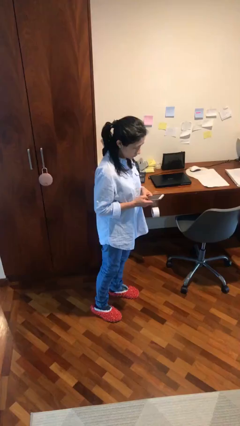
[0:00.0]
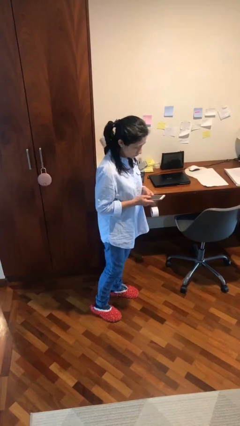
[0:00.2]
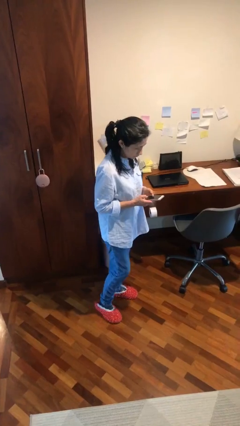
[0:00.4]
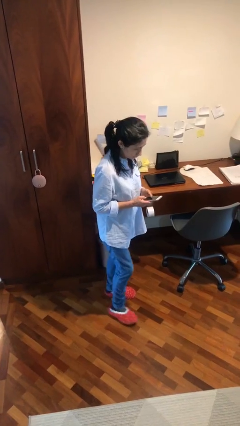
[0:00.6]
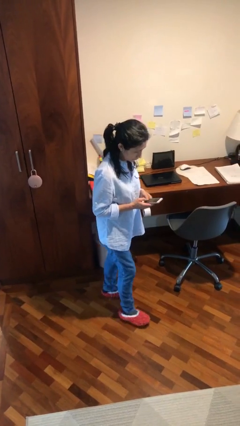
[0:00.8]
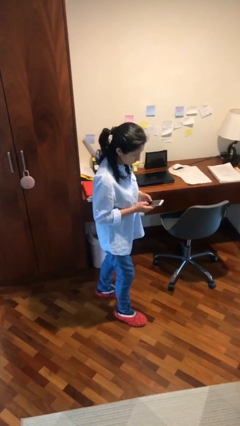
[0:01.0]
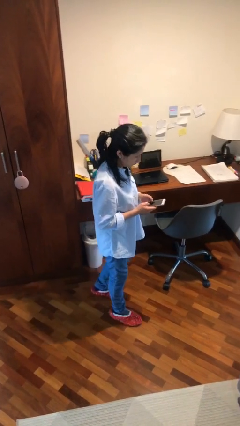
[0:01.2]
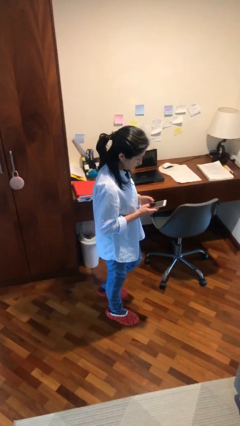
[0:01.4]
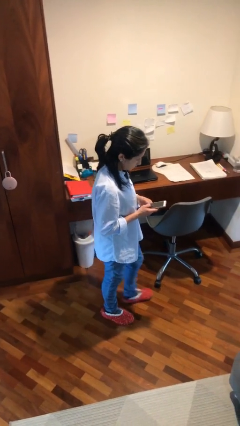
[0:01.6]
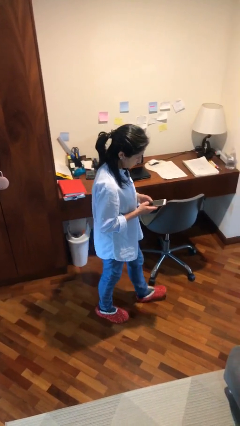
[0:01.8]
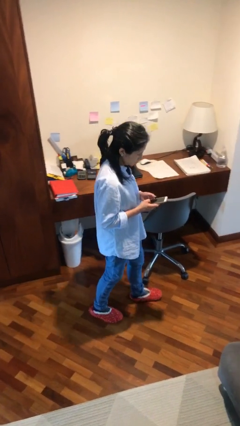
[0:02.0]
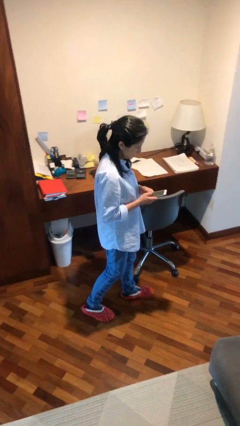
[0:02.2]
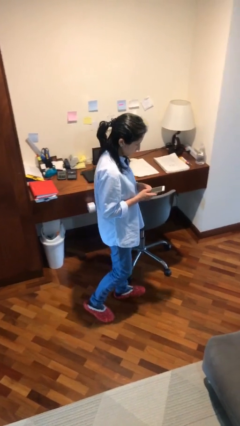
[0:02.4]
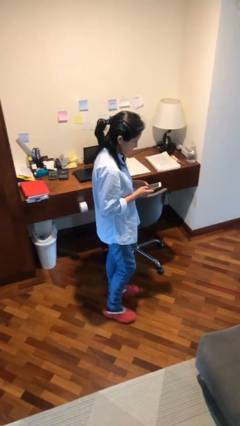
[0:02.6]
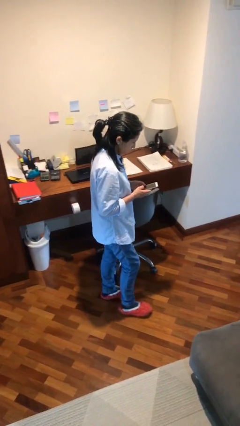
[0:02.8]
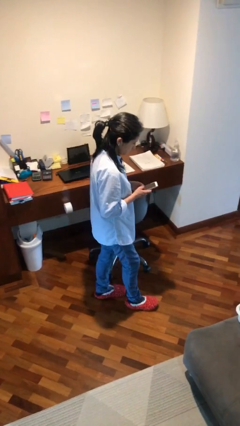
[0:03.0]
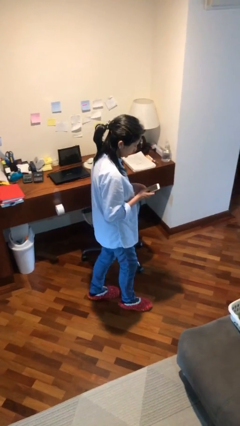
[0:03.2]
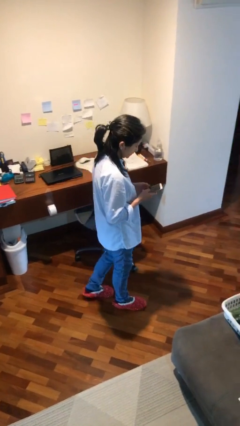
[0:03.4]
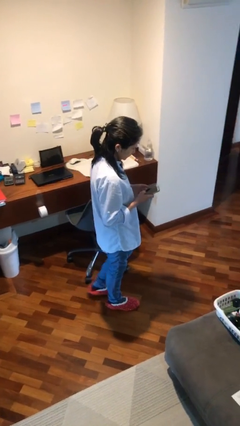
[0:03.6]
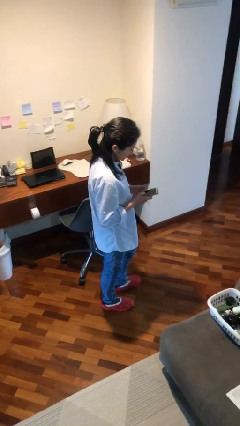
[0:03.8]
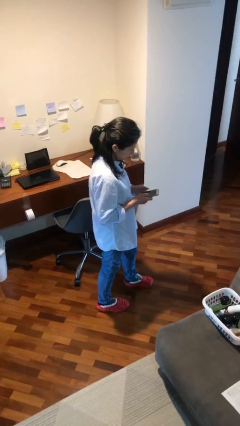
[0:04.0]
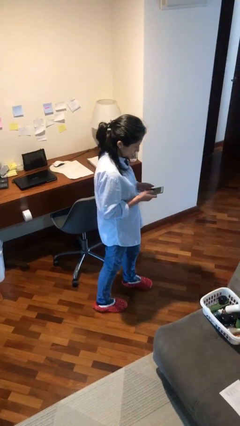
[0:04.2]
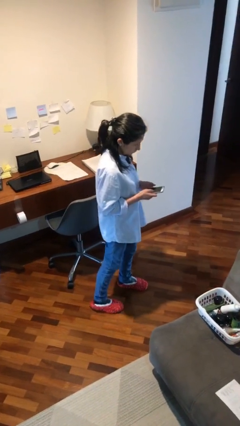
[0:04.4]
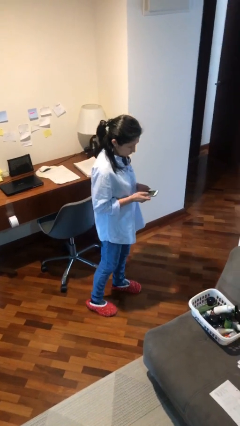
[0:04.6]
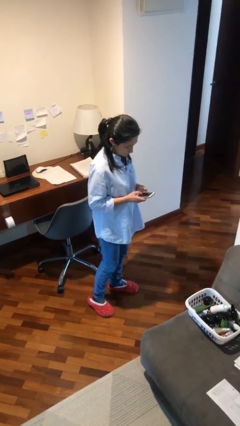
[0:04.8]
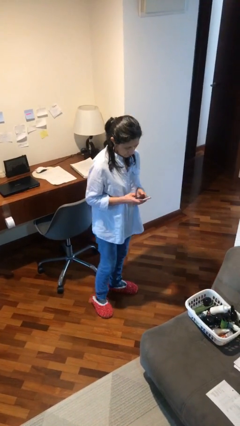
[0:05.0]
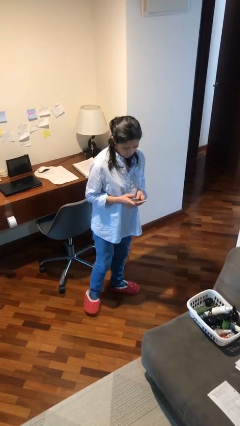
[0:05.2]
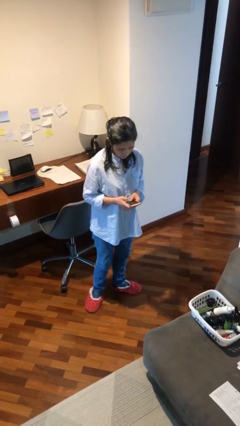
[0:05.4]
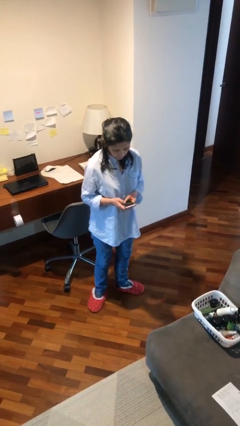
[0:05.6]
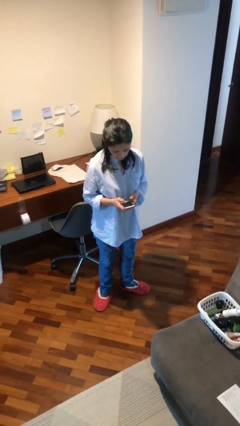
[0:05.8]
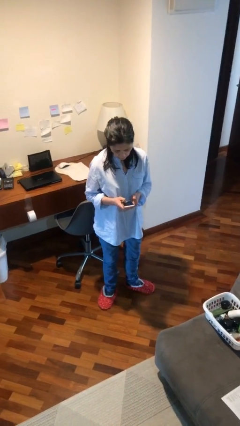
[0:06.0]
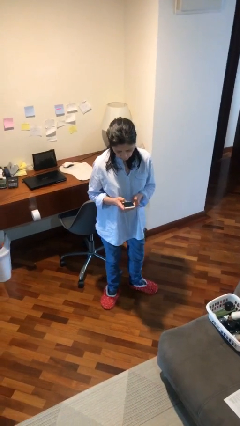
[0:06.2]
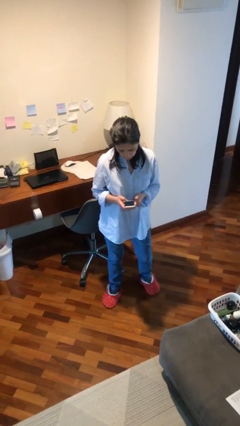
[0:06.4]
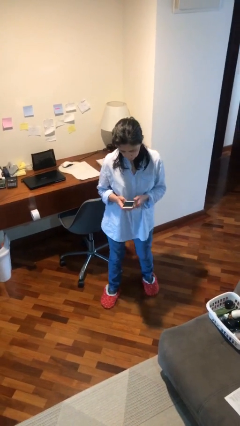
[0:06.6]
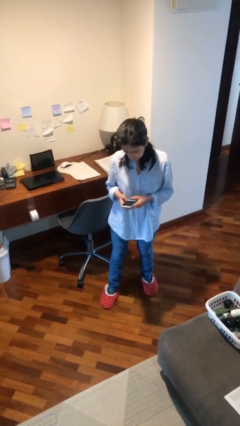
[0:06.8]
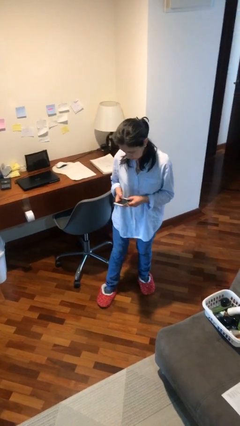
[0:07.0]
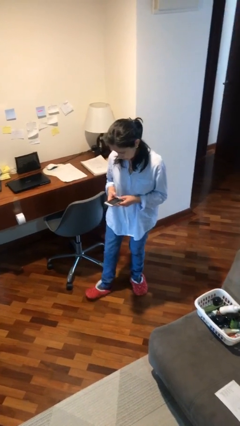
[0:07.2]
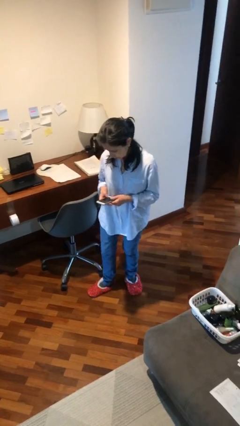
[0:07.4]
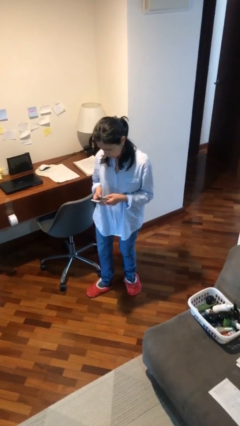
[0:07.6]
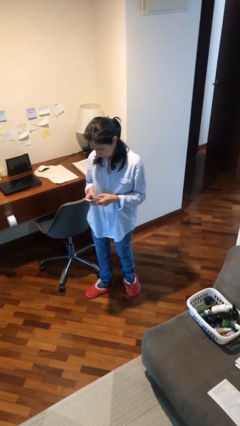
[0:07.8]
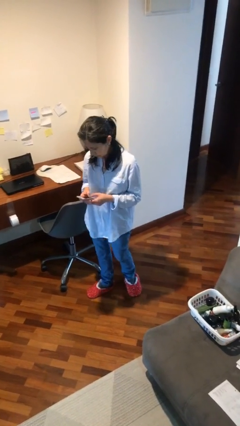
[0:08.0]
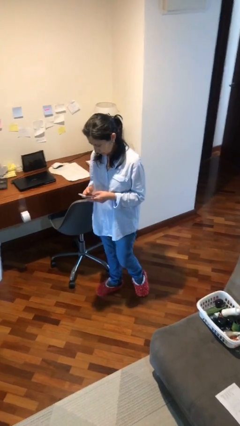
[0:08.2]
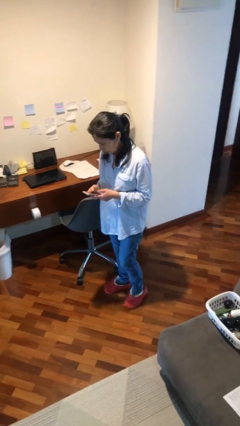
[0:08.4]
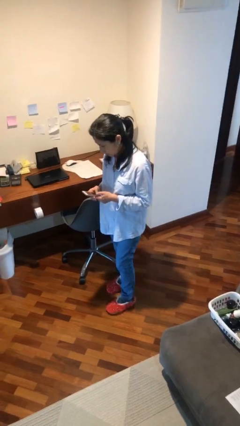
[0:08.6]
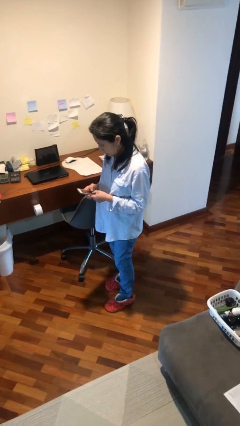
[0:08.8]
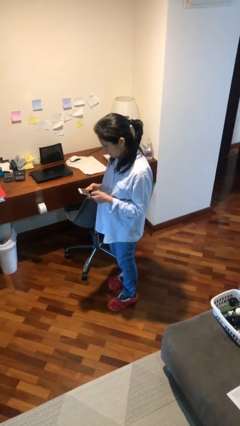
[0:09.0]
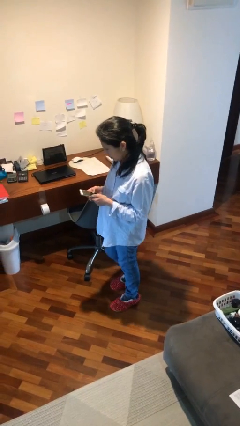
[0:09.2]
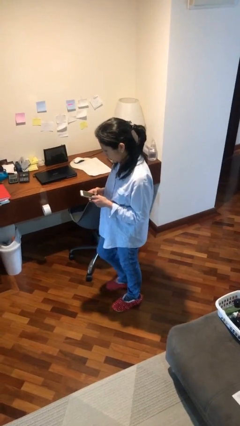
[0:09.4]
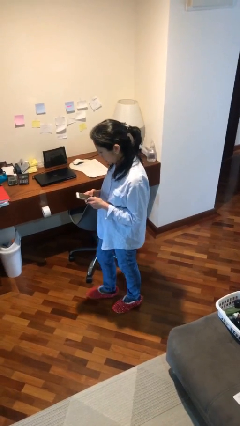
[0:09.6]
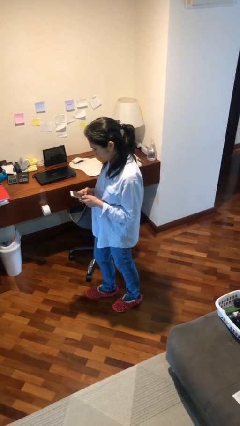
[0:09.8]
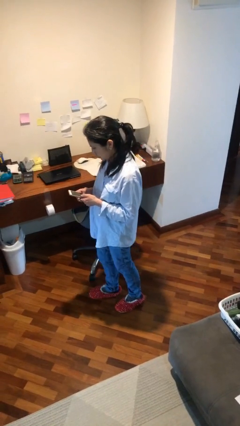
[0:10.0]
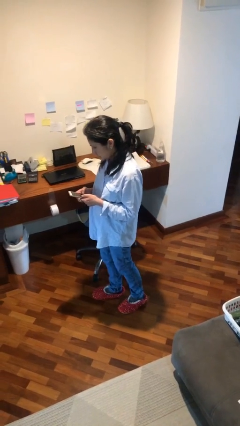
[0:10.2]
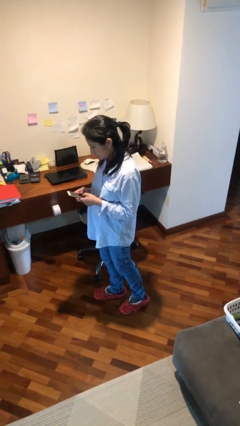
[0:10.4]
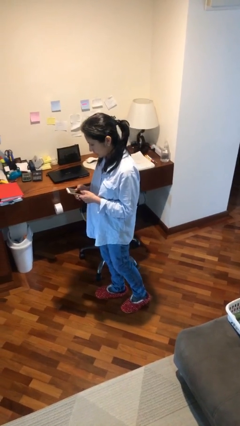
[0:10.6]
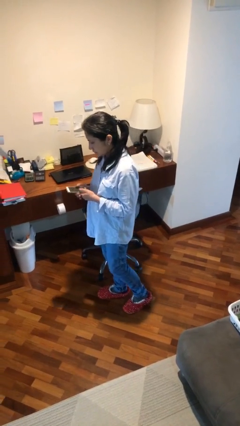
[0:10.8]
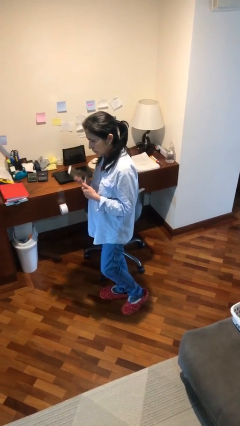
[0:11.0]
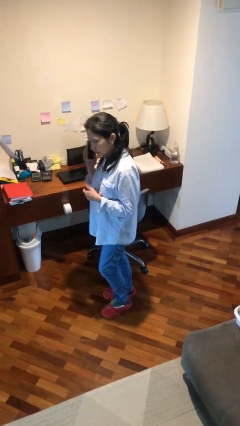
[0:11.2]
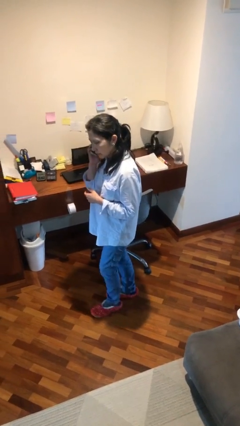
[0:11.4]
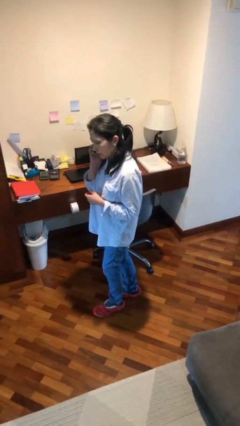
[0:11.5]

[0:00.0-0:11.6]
person texts on phone

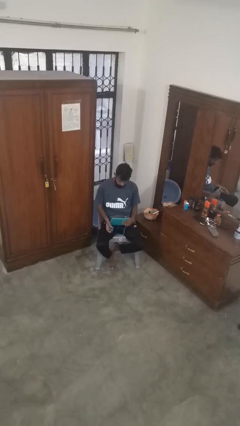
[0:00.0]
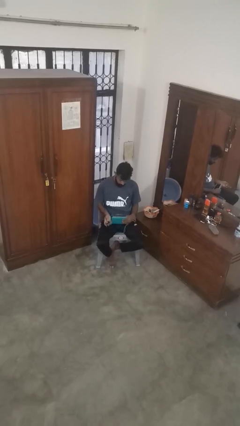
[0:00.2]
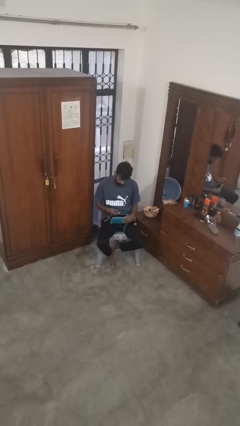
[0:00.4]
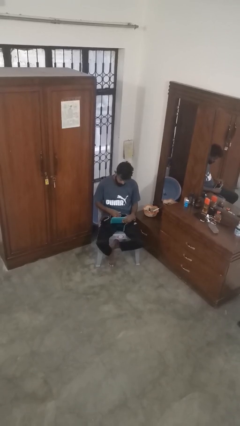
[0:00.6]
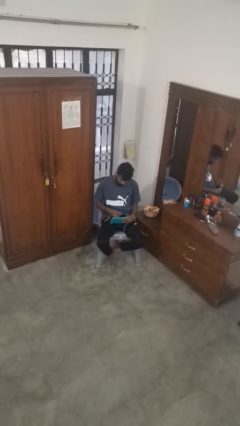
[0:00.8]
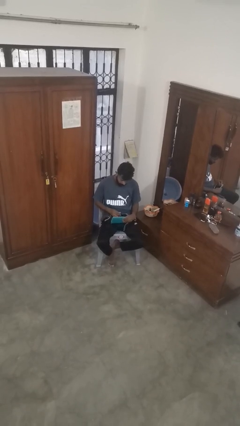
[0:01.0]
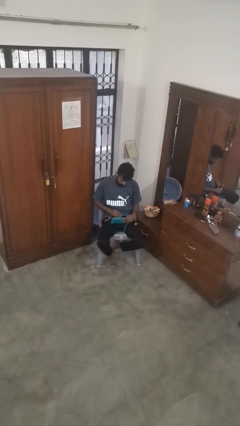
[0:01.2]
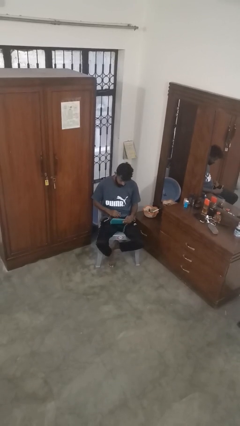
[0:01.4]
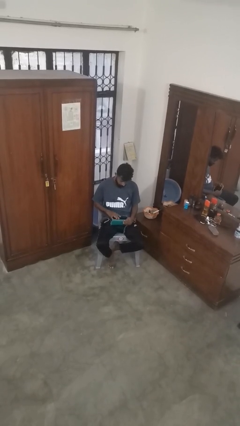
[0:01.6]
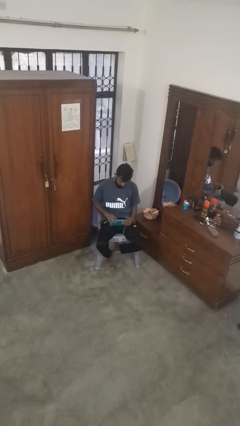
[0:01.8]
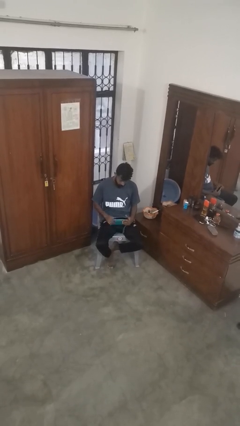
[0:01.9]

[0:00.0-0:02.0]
person puts object into purse

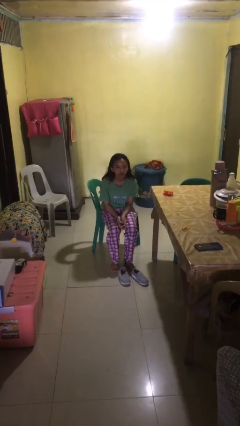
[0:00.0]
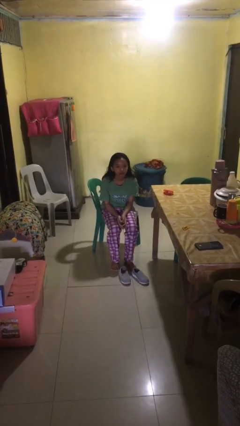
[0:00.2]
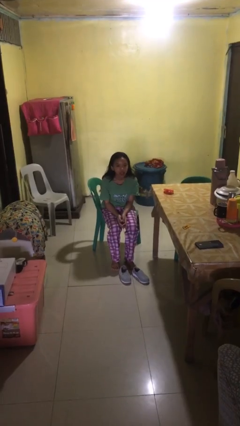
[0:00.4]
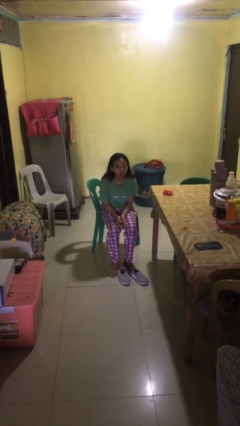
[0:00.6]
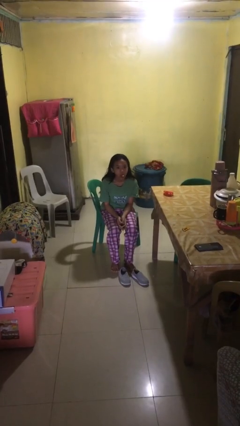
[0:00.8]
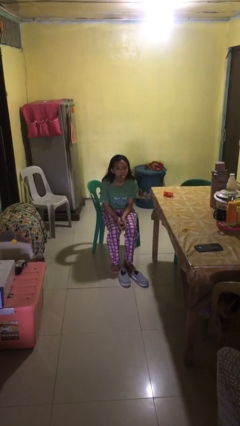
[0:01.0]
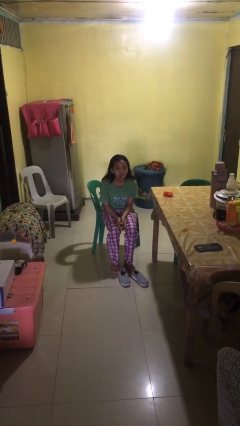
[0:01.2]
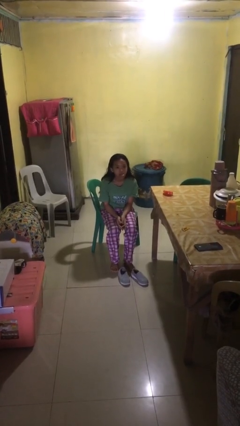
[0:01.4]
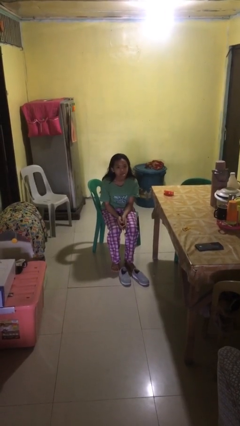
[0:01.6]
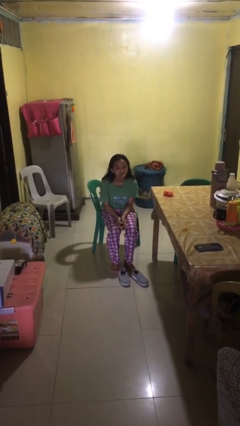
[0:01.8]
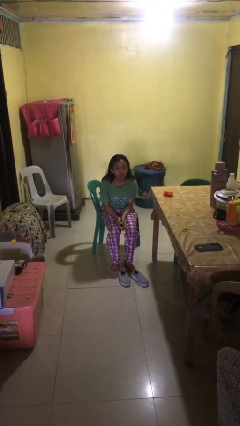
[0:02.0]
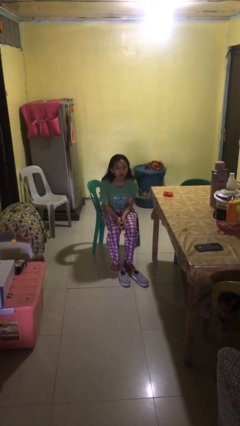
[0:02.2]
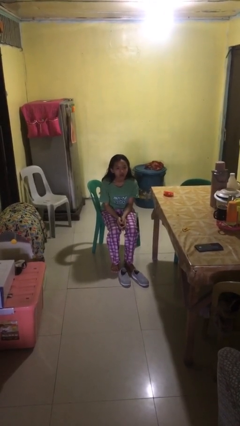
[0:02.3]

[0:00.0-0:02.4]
person sticks out tongue

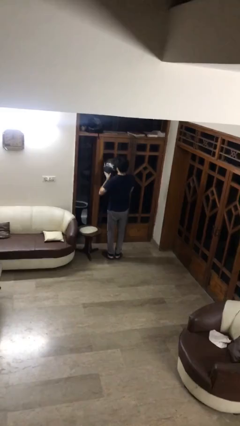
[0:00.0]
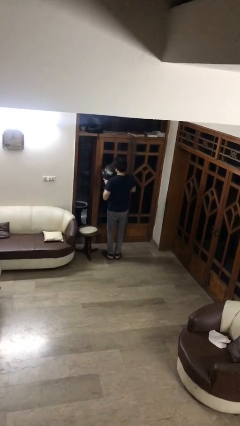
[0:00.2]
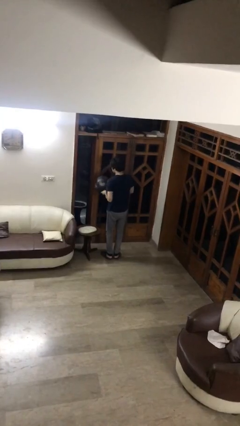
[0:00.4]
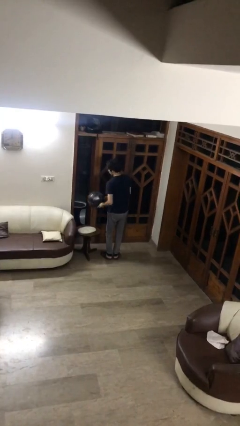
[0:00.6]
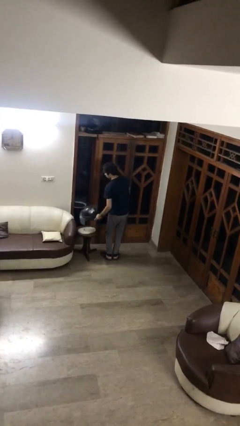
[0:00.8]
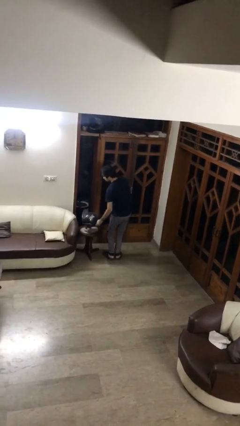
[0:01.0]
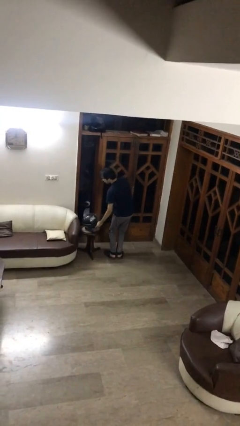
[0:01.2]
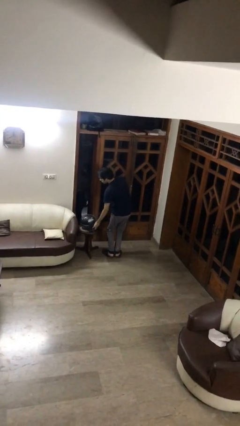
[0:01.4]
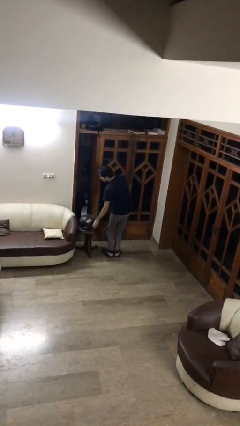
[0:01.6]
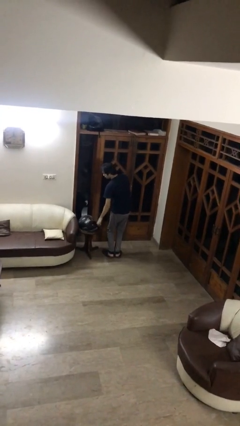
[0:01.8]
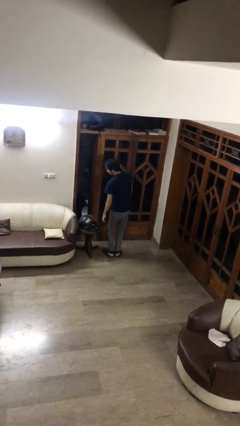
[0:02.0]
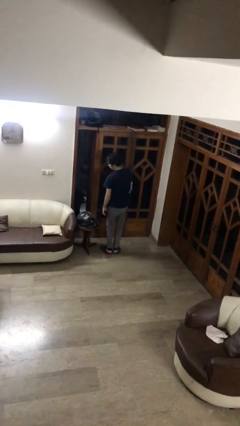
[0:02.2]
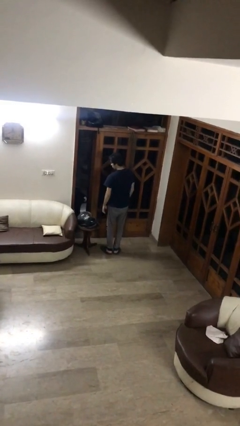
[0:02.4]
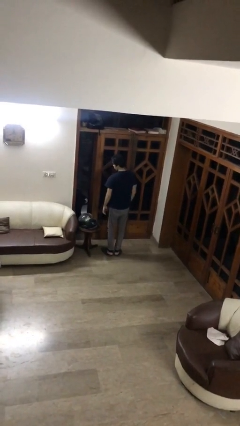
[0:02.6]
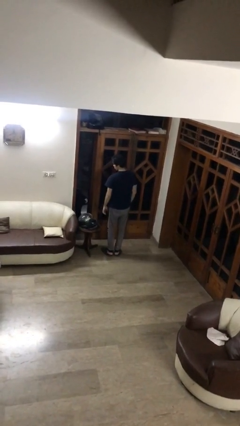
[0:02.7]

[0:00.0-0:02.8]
person puts down object on table
